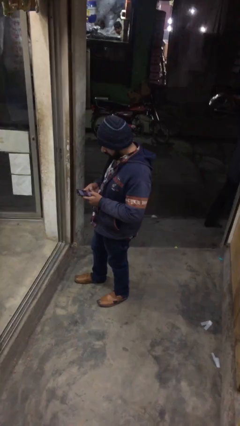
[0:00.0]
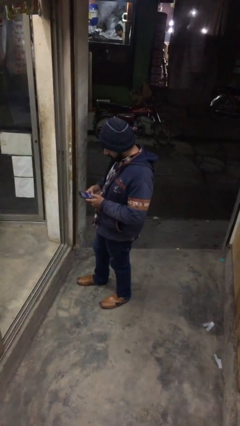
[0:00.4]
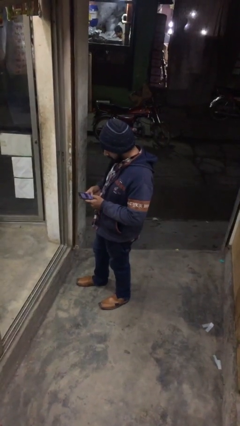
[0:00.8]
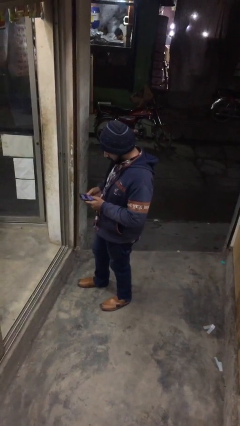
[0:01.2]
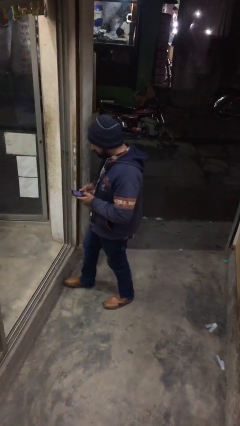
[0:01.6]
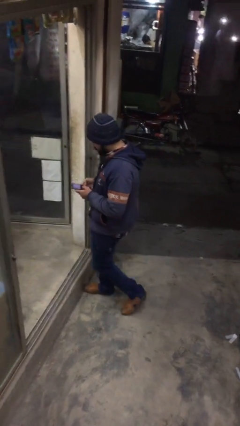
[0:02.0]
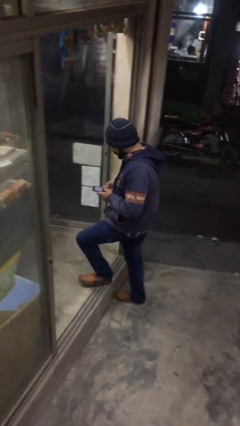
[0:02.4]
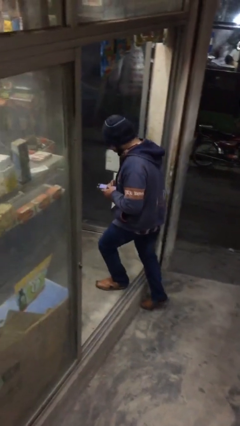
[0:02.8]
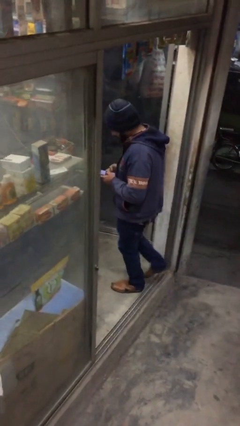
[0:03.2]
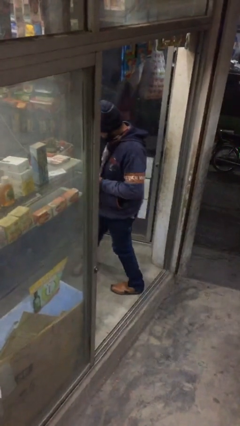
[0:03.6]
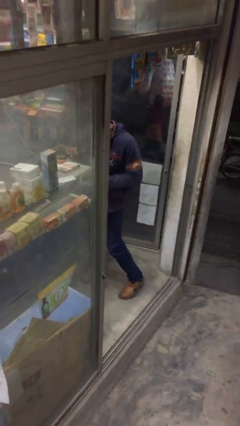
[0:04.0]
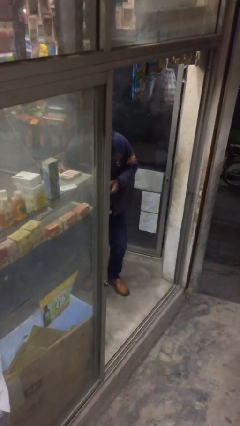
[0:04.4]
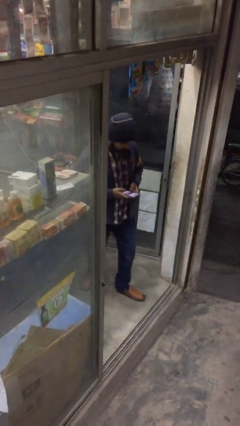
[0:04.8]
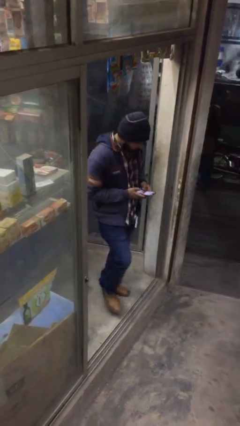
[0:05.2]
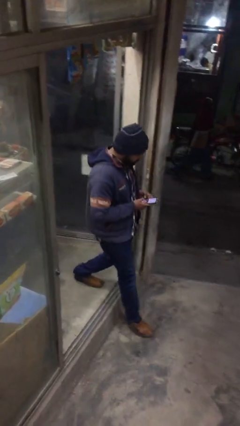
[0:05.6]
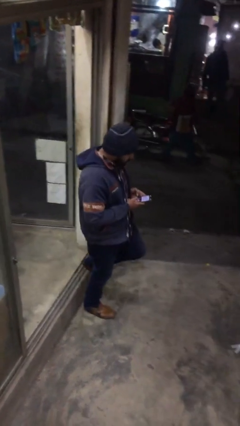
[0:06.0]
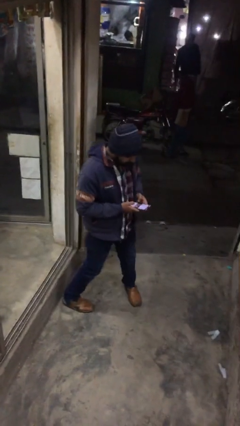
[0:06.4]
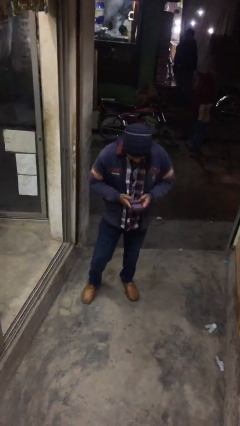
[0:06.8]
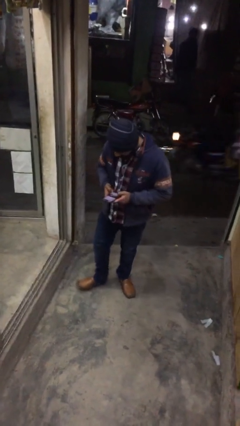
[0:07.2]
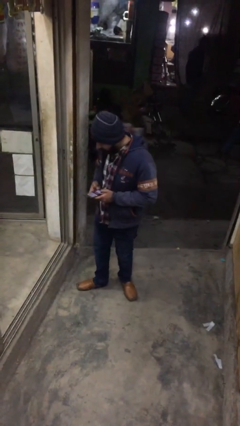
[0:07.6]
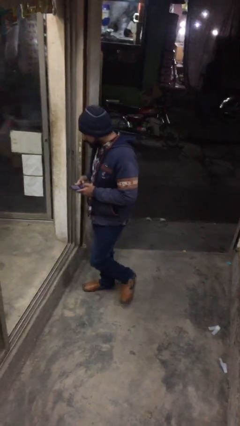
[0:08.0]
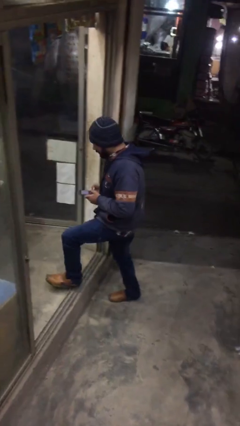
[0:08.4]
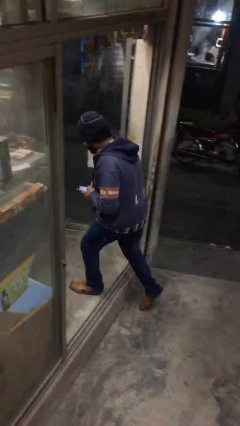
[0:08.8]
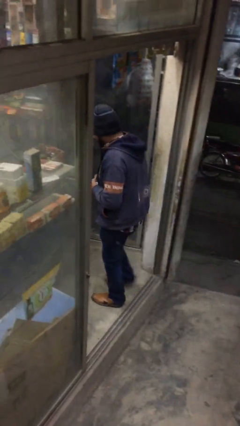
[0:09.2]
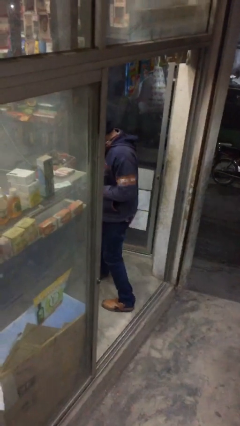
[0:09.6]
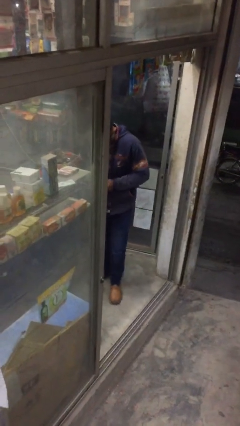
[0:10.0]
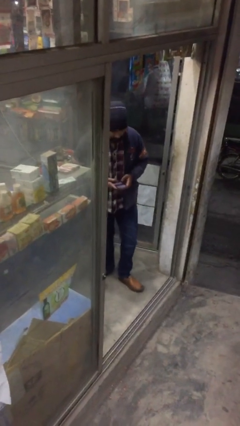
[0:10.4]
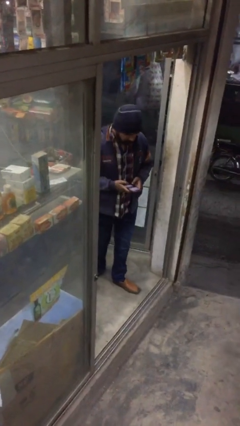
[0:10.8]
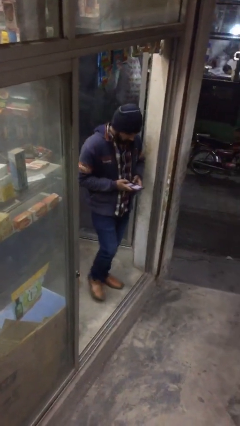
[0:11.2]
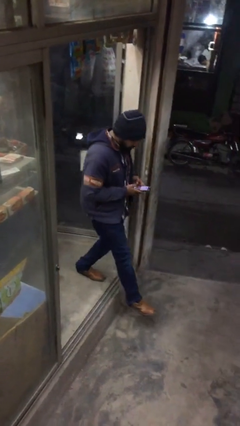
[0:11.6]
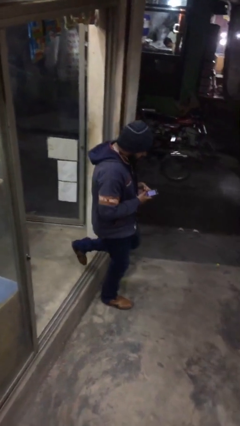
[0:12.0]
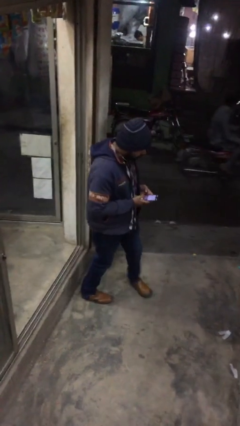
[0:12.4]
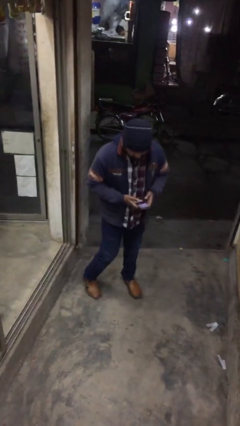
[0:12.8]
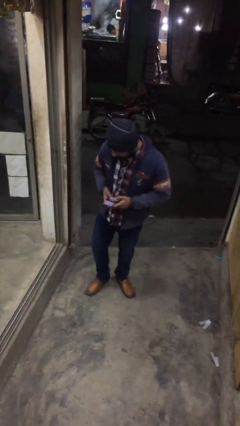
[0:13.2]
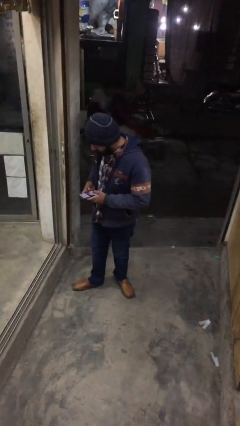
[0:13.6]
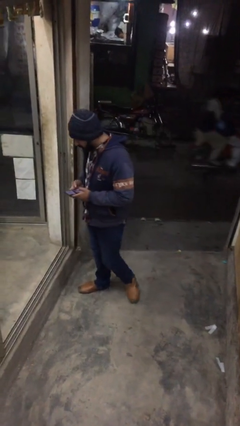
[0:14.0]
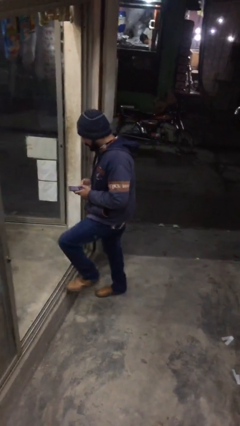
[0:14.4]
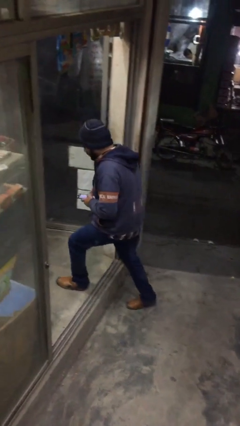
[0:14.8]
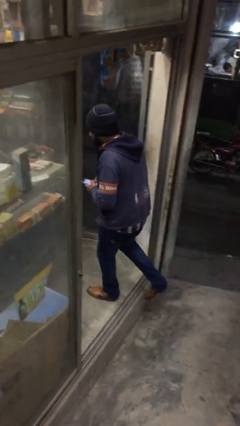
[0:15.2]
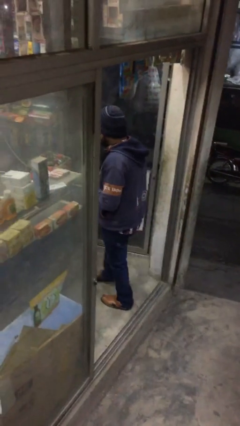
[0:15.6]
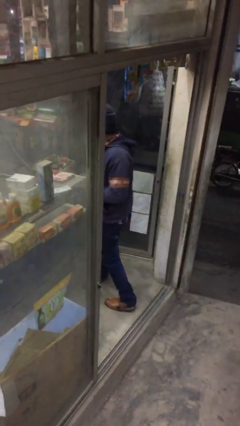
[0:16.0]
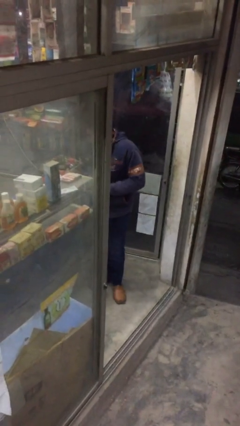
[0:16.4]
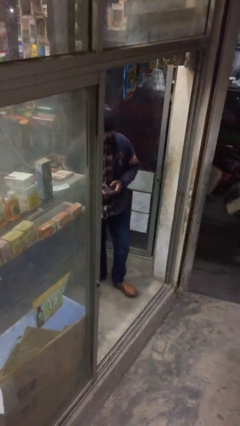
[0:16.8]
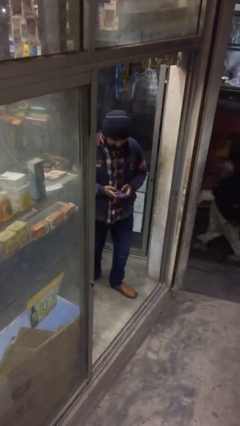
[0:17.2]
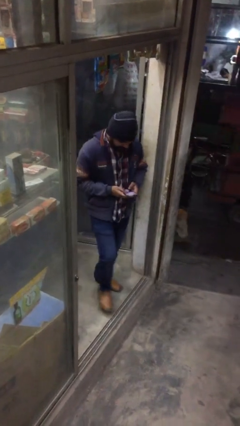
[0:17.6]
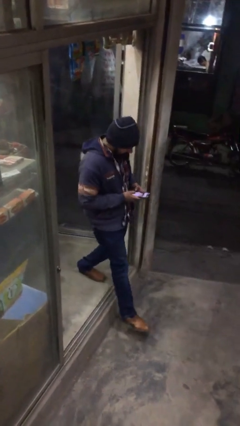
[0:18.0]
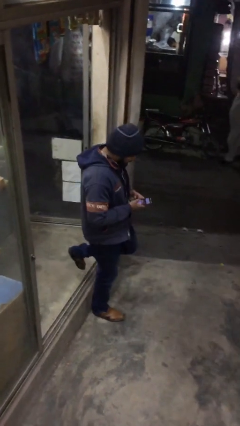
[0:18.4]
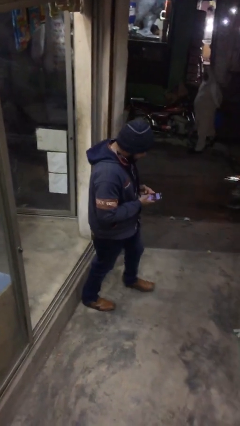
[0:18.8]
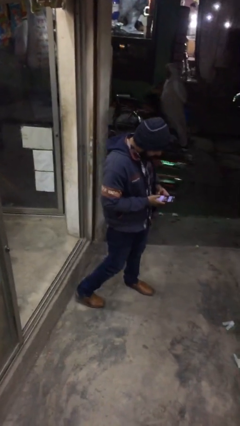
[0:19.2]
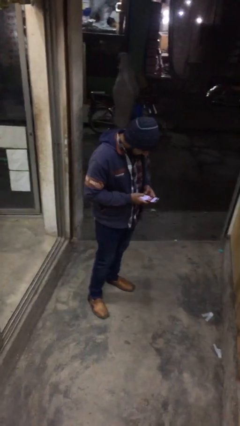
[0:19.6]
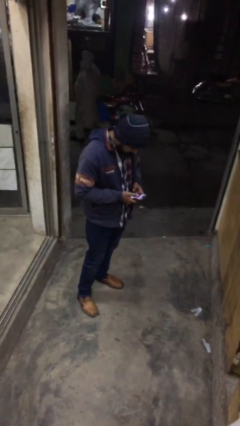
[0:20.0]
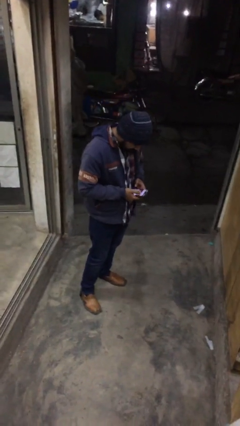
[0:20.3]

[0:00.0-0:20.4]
person texts on phone

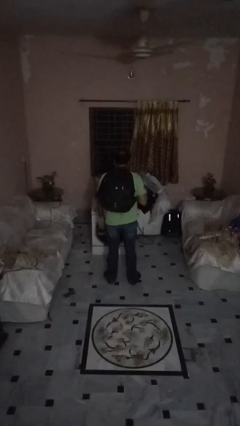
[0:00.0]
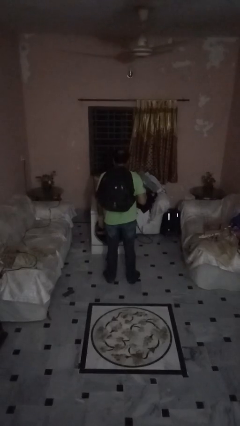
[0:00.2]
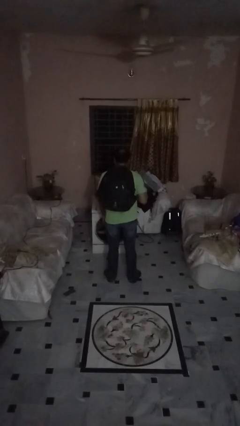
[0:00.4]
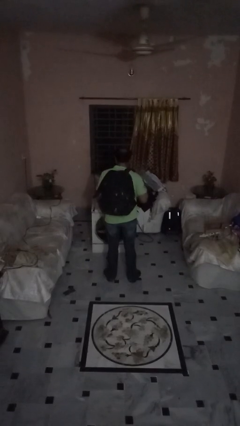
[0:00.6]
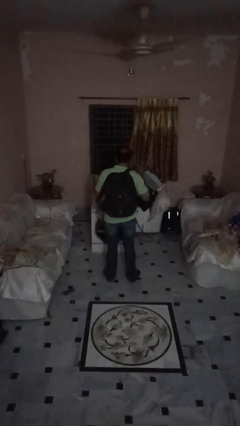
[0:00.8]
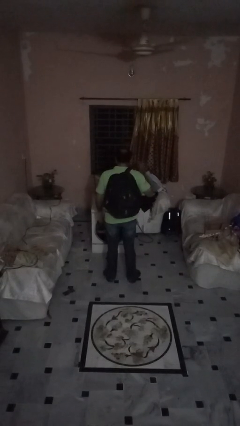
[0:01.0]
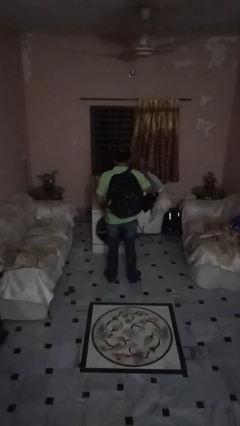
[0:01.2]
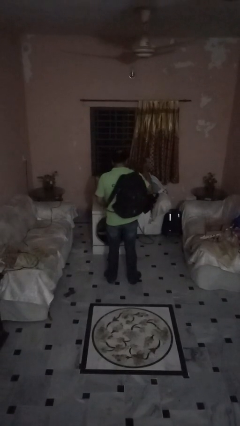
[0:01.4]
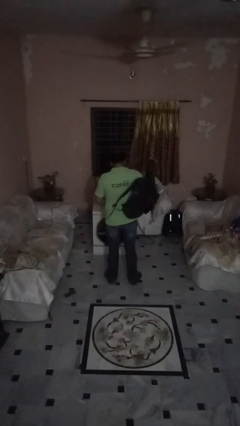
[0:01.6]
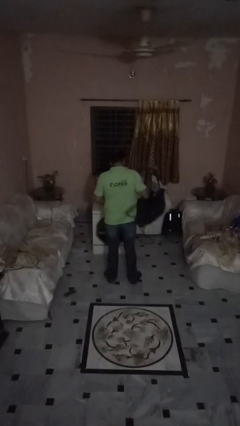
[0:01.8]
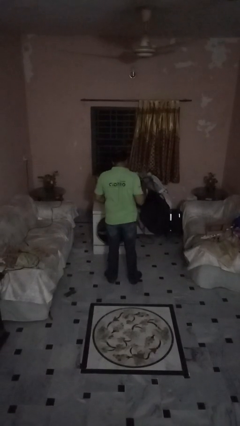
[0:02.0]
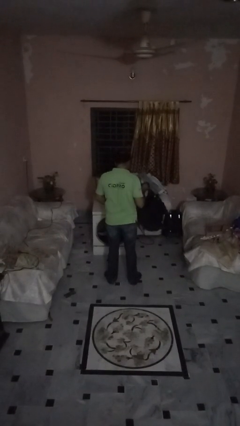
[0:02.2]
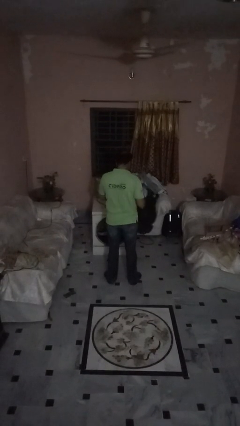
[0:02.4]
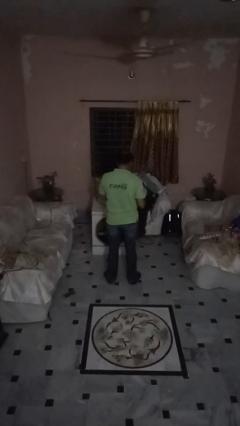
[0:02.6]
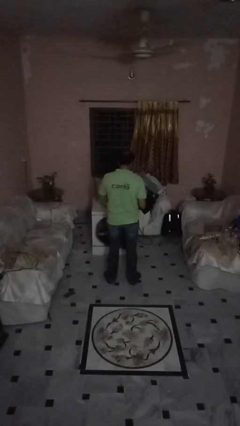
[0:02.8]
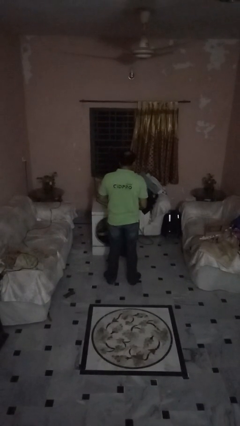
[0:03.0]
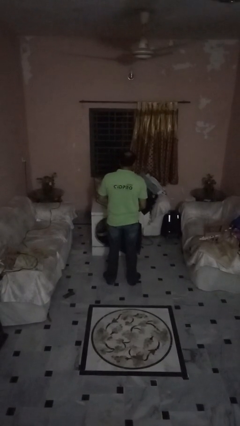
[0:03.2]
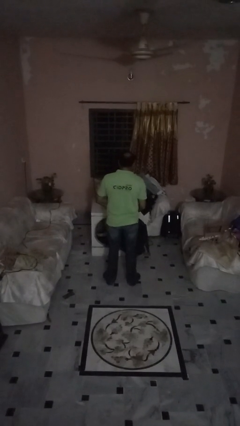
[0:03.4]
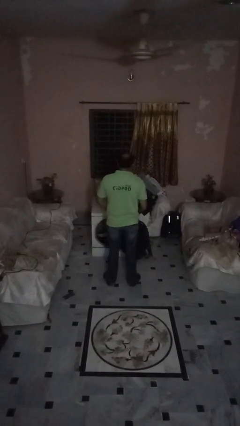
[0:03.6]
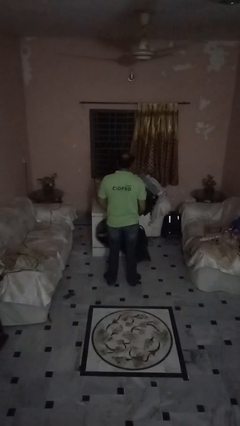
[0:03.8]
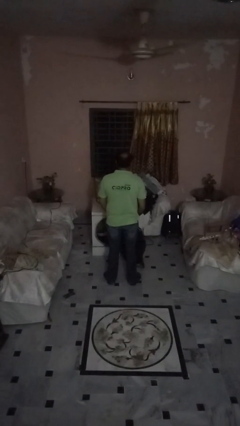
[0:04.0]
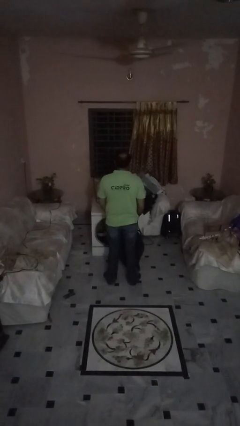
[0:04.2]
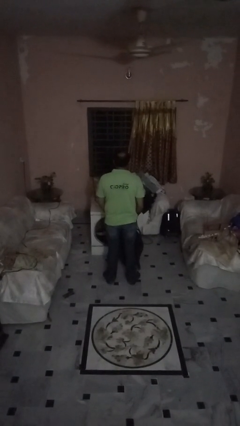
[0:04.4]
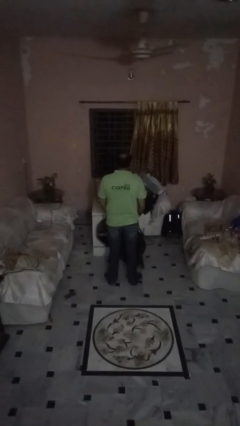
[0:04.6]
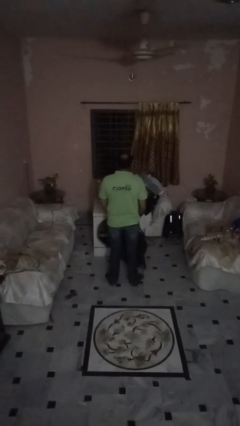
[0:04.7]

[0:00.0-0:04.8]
person takes off backpack

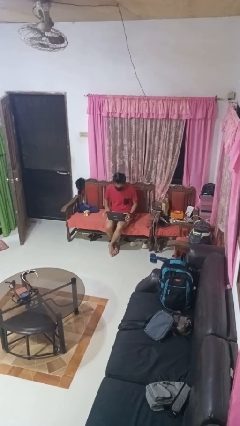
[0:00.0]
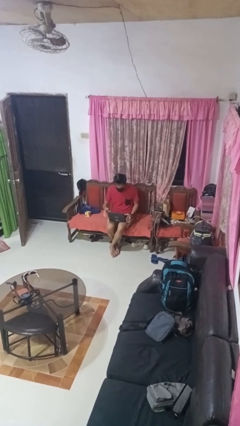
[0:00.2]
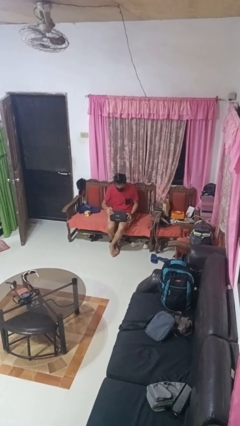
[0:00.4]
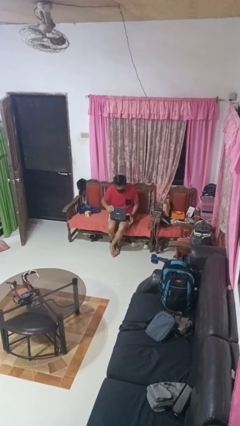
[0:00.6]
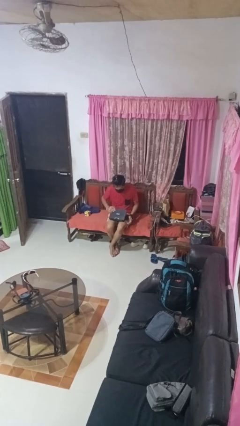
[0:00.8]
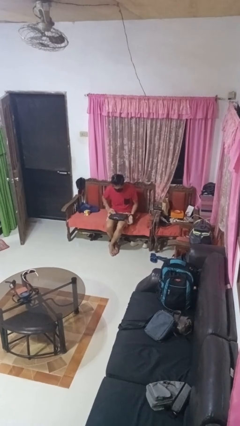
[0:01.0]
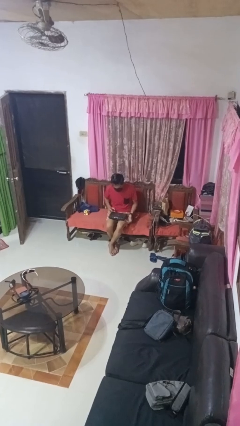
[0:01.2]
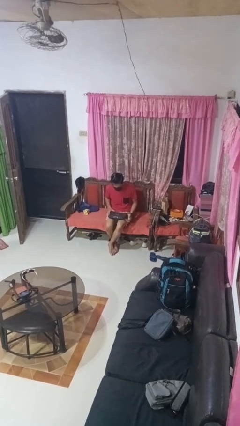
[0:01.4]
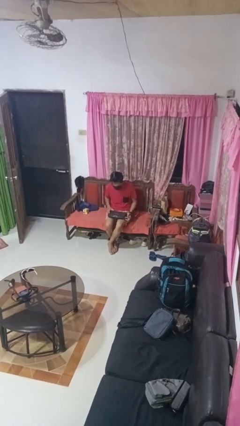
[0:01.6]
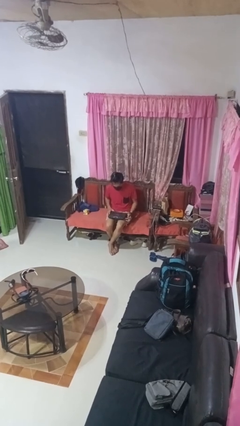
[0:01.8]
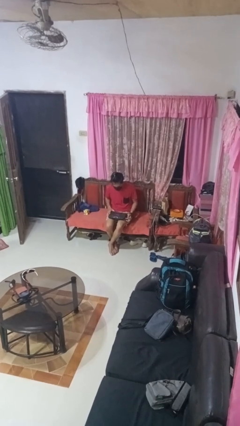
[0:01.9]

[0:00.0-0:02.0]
person closes laptop

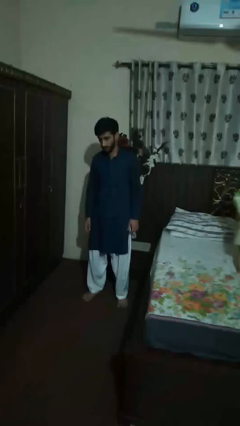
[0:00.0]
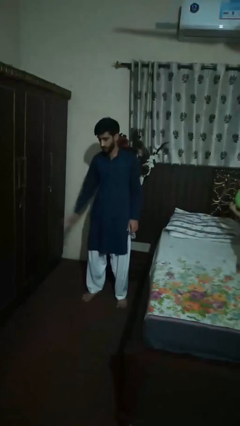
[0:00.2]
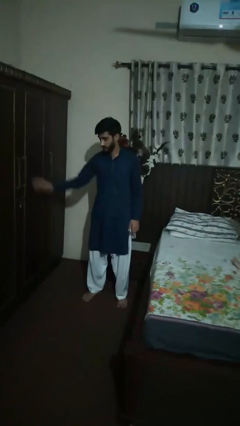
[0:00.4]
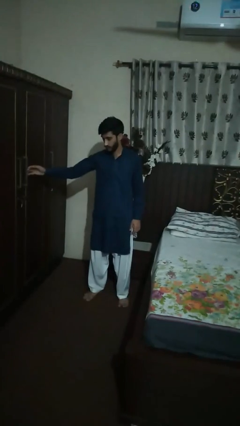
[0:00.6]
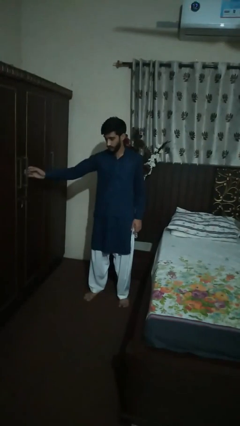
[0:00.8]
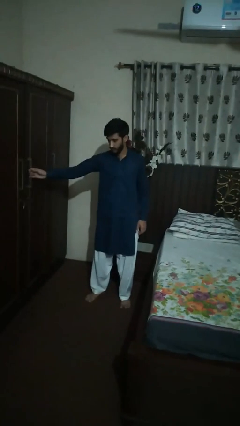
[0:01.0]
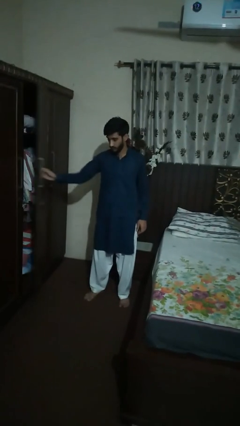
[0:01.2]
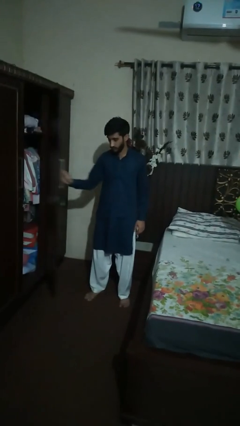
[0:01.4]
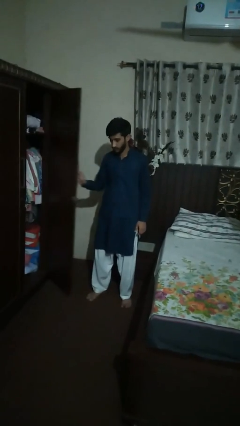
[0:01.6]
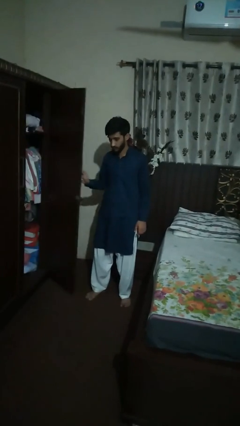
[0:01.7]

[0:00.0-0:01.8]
person opens dresser drawer
